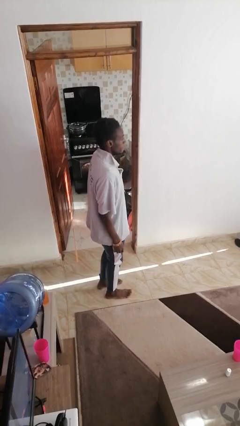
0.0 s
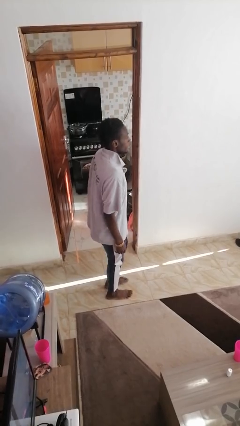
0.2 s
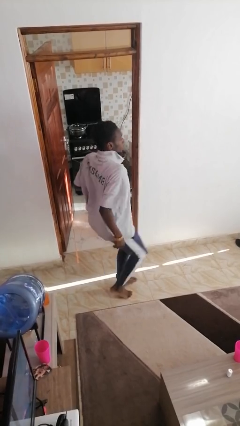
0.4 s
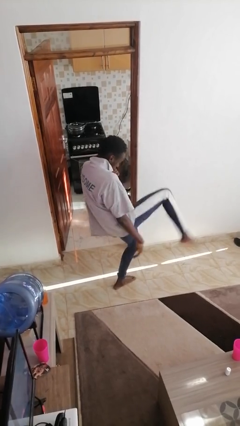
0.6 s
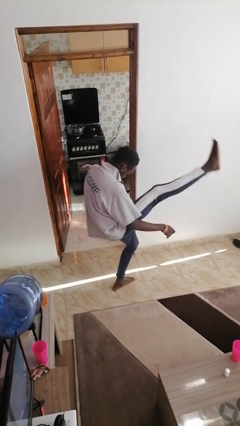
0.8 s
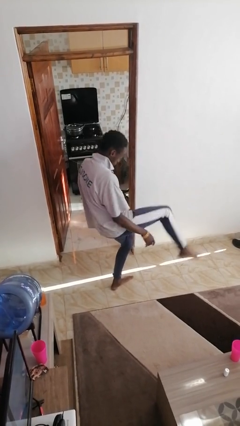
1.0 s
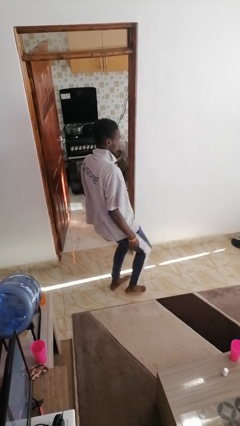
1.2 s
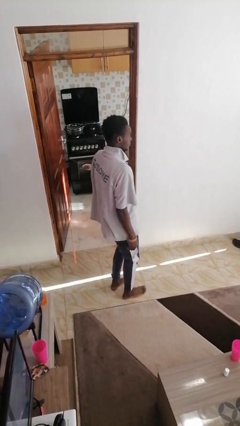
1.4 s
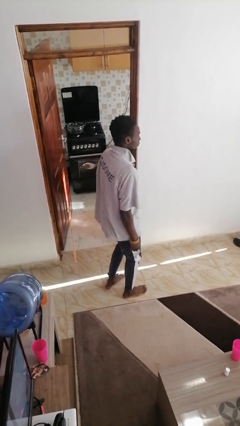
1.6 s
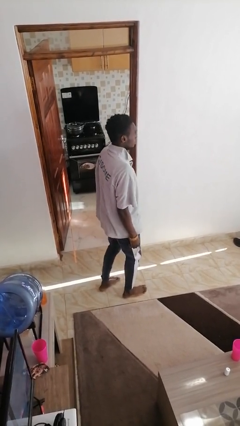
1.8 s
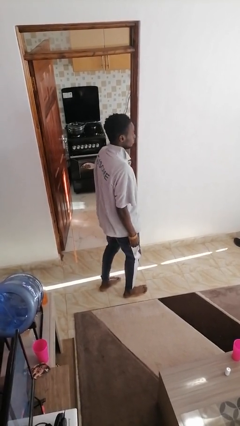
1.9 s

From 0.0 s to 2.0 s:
person karate kicks

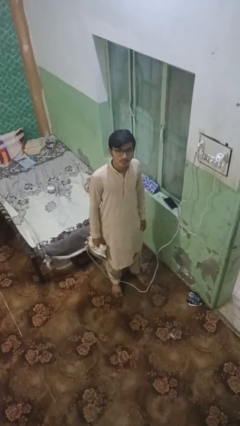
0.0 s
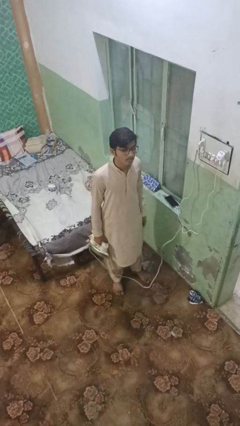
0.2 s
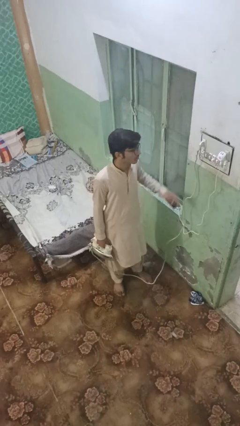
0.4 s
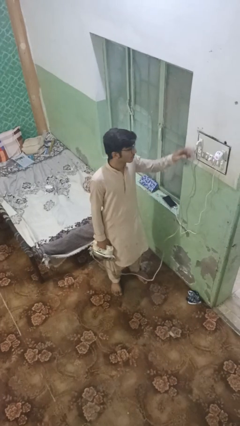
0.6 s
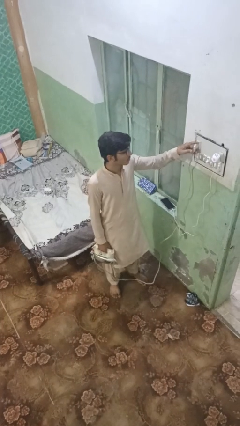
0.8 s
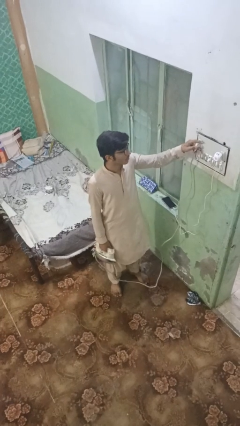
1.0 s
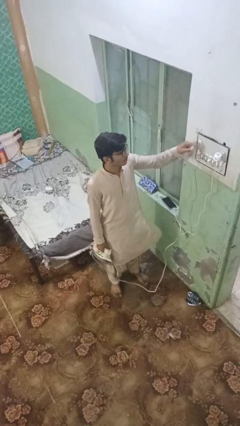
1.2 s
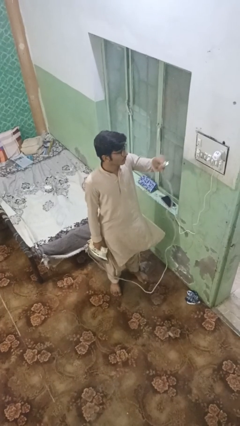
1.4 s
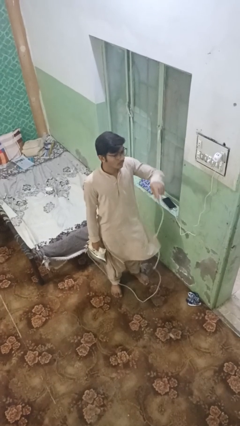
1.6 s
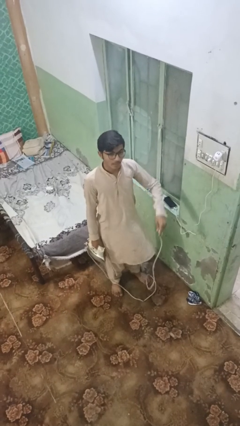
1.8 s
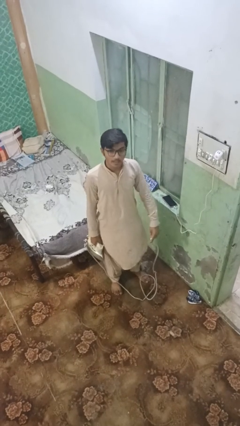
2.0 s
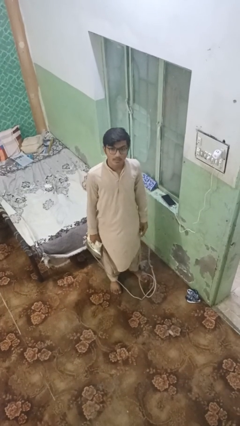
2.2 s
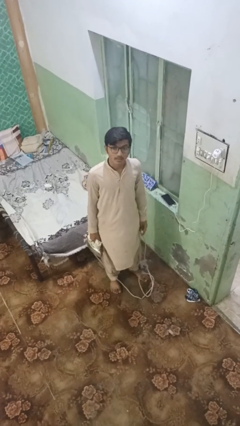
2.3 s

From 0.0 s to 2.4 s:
person unplugs from electrical socket

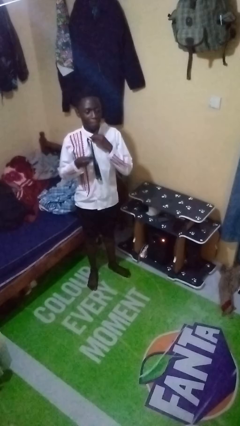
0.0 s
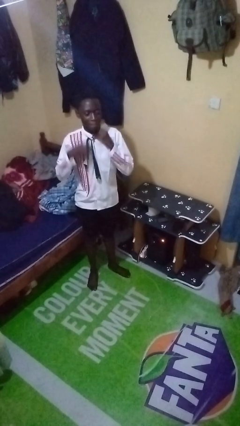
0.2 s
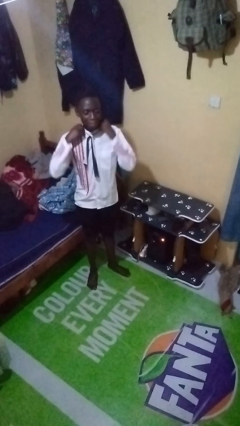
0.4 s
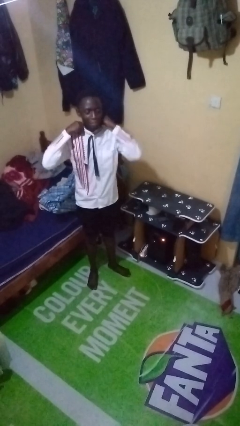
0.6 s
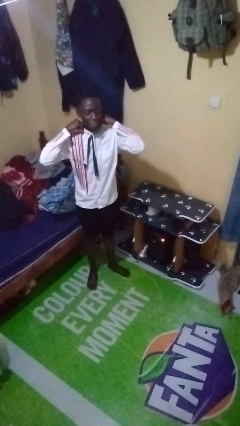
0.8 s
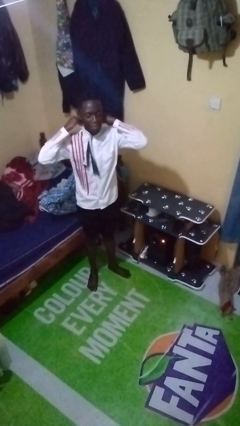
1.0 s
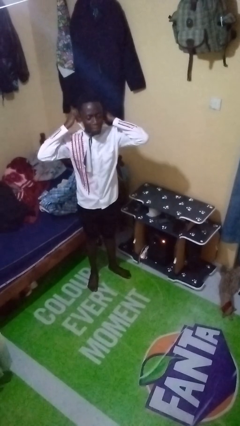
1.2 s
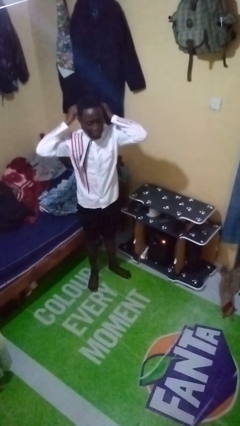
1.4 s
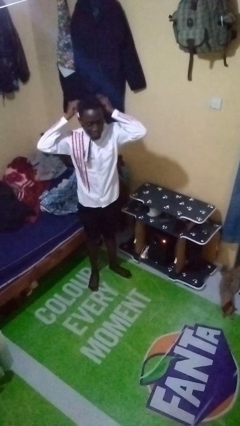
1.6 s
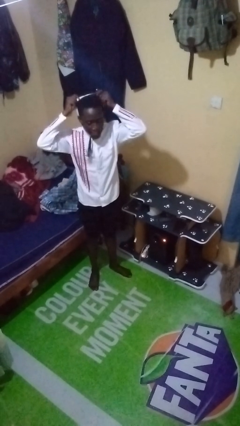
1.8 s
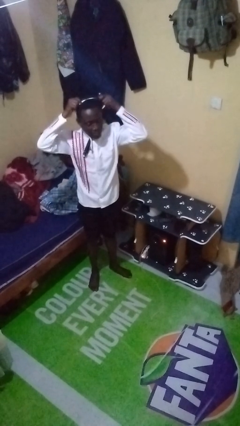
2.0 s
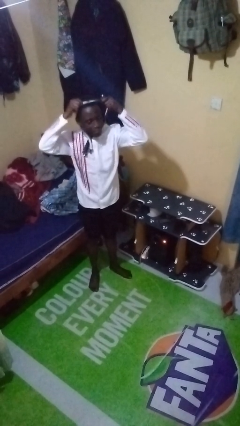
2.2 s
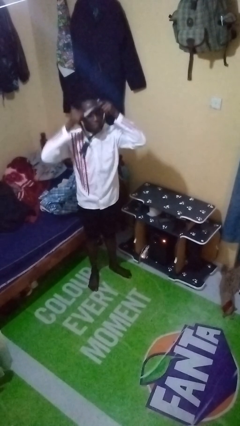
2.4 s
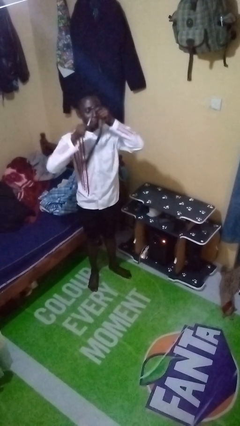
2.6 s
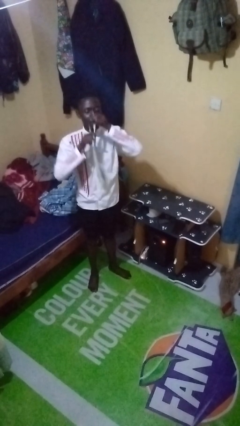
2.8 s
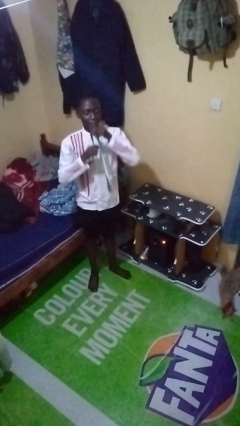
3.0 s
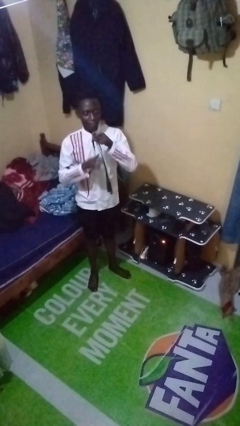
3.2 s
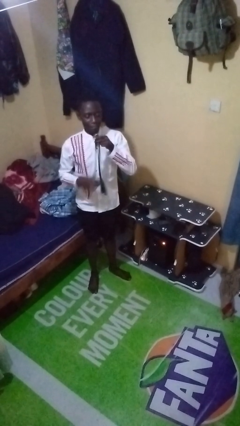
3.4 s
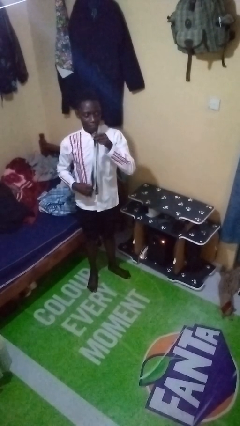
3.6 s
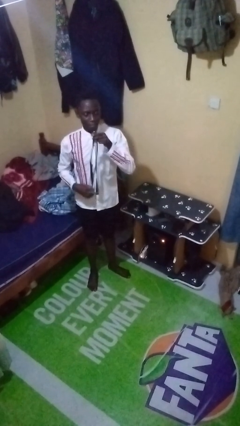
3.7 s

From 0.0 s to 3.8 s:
person takes off necktie

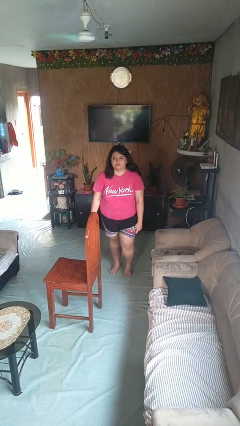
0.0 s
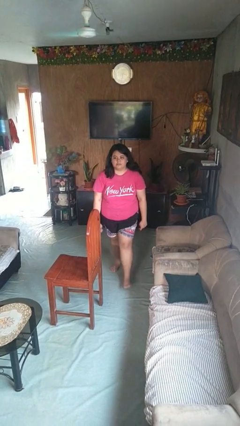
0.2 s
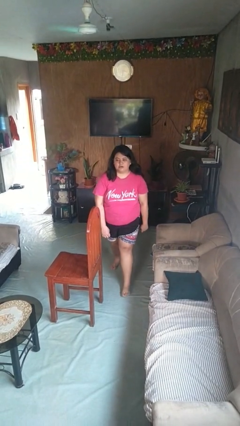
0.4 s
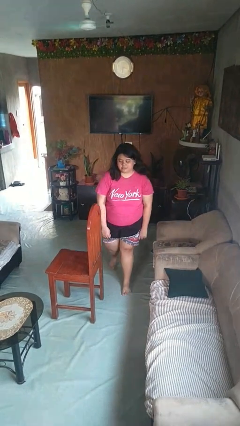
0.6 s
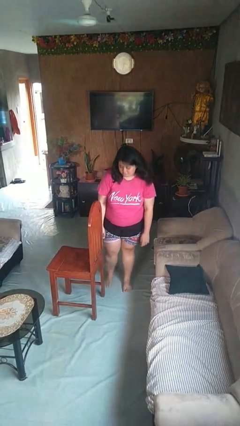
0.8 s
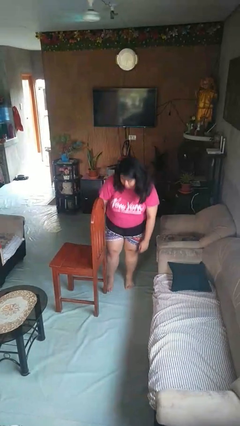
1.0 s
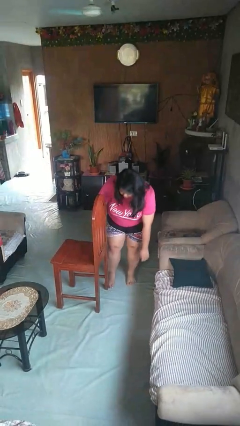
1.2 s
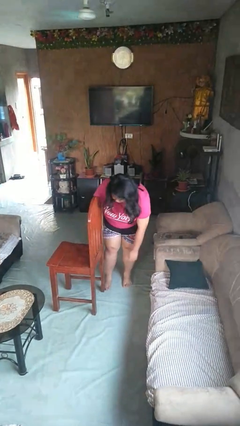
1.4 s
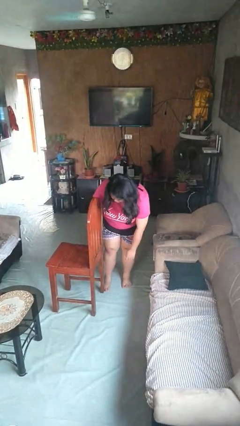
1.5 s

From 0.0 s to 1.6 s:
person stubs toe

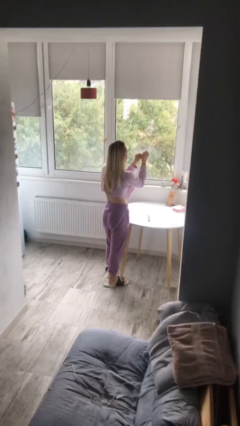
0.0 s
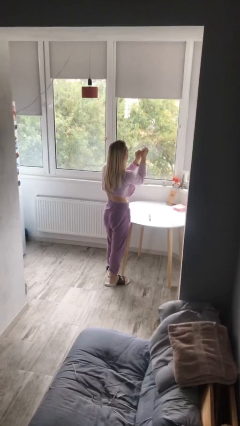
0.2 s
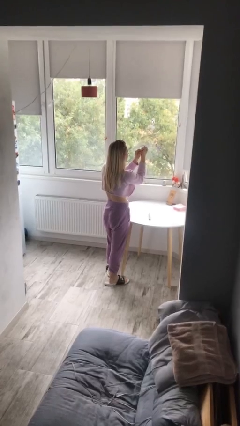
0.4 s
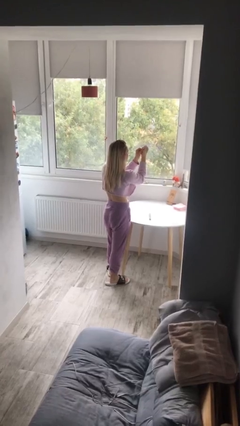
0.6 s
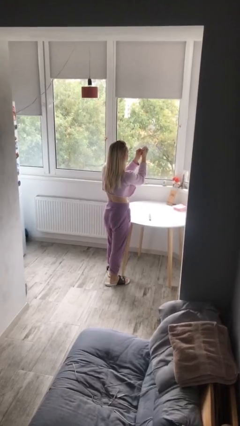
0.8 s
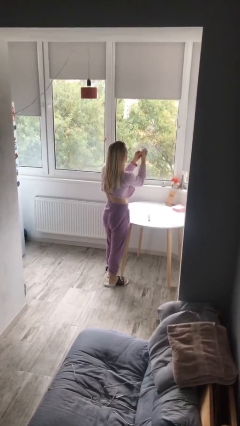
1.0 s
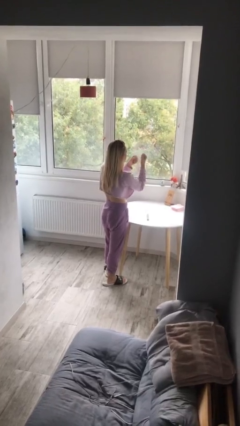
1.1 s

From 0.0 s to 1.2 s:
person clips fingernails

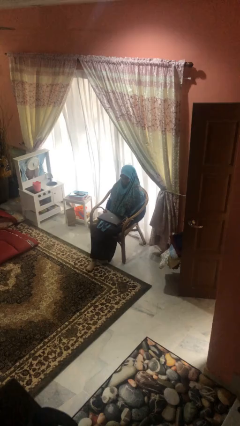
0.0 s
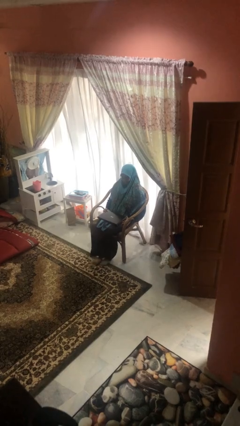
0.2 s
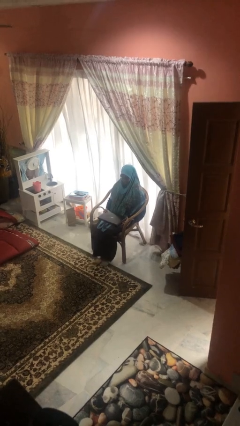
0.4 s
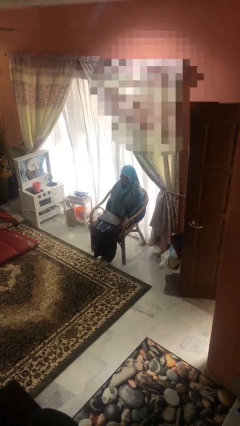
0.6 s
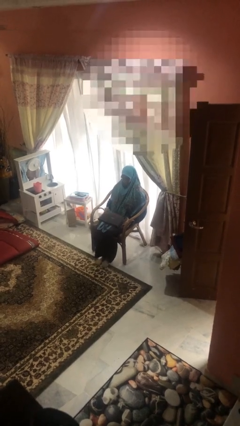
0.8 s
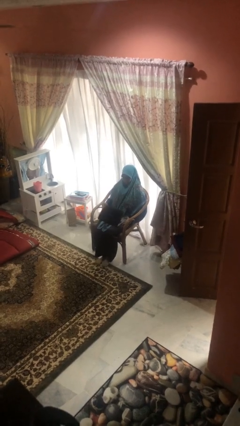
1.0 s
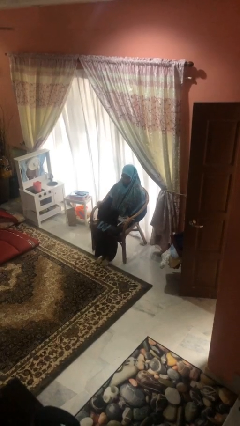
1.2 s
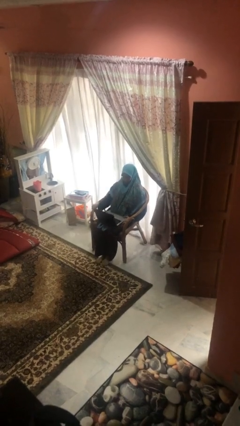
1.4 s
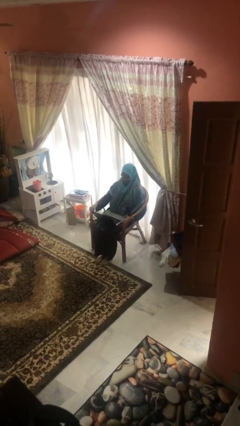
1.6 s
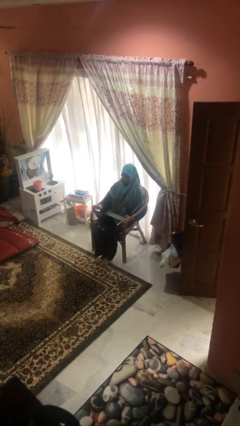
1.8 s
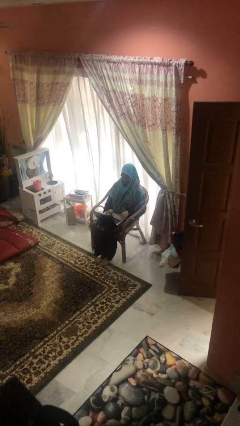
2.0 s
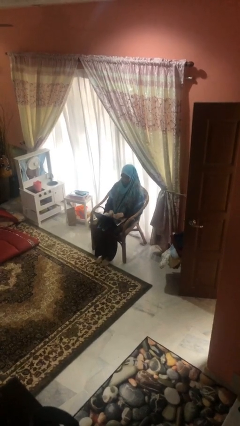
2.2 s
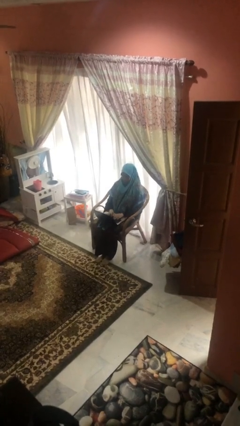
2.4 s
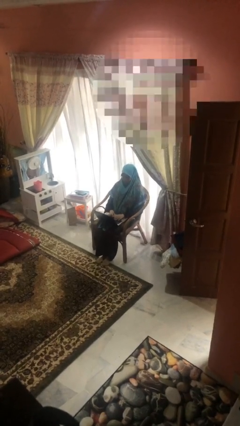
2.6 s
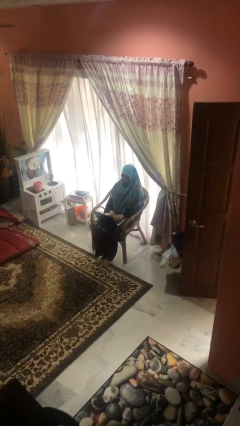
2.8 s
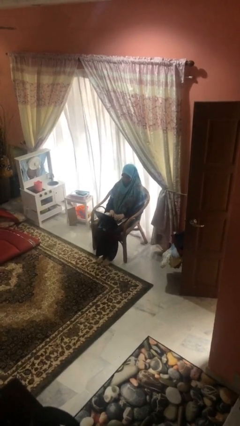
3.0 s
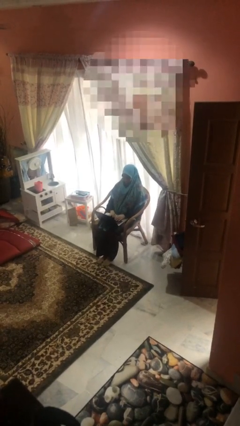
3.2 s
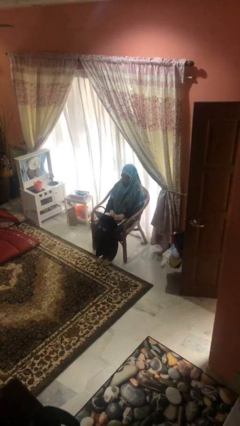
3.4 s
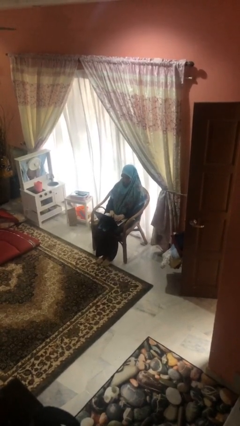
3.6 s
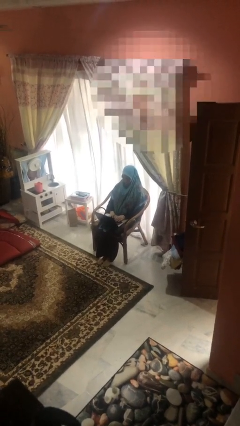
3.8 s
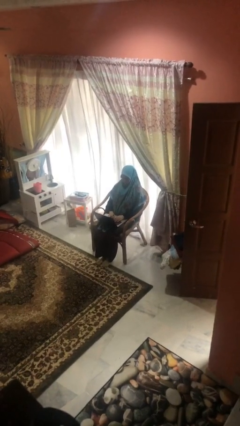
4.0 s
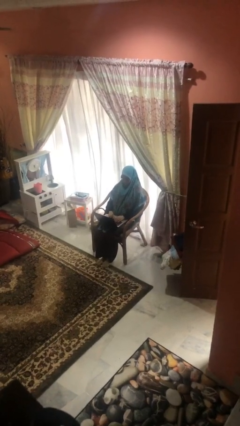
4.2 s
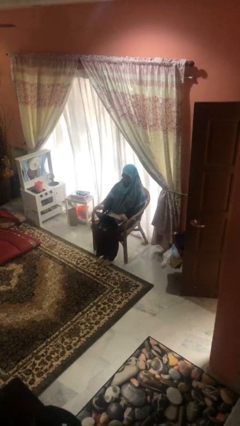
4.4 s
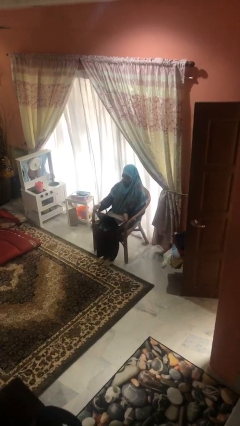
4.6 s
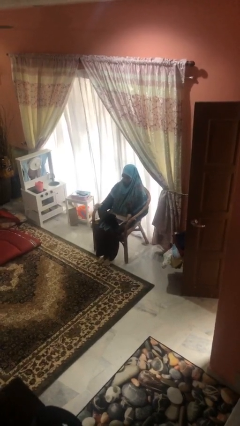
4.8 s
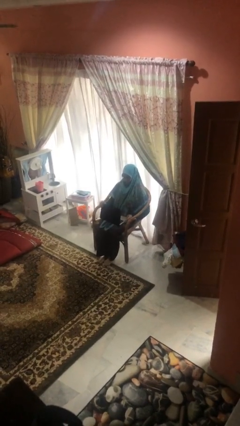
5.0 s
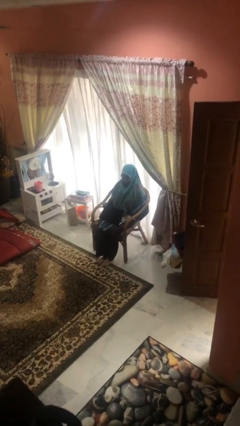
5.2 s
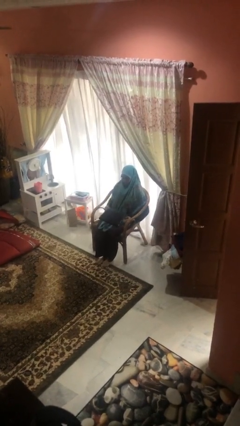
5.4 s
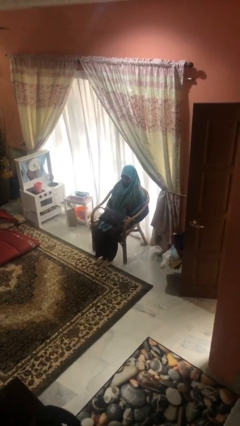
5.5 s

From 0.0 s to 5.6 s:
person interacts with laptop

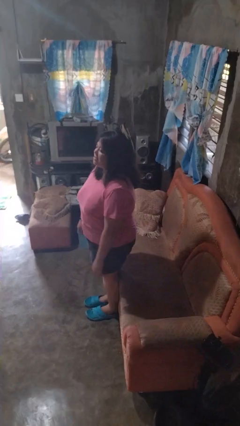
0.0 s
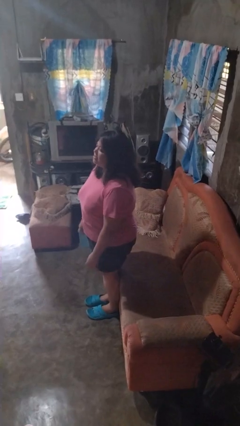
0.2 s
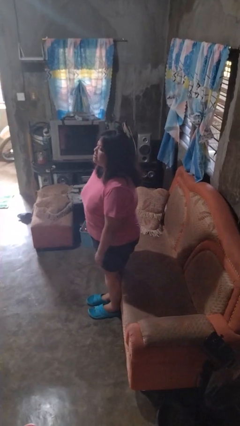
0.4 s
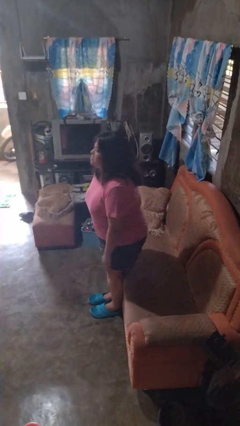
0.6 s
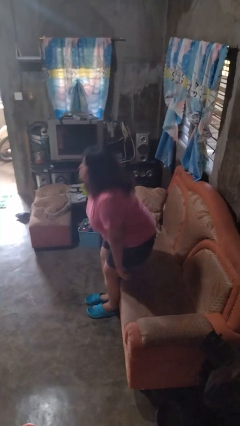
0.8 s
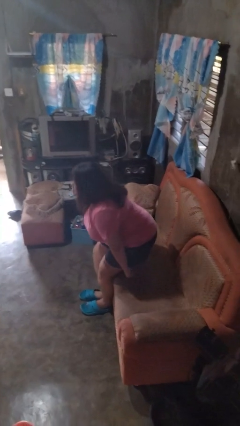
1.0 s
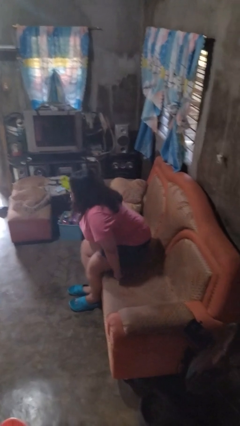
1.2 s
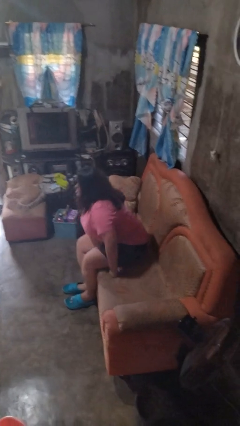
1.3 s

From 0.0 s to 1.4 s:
person lies down on couch
